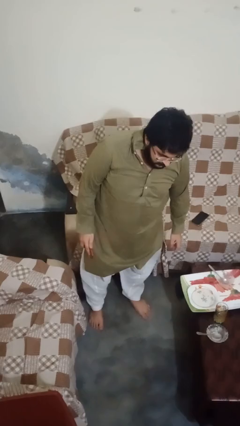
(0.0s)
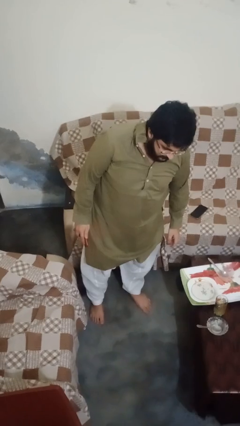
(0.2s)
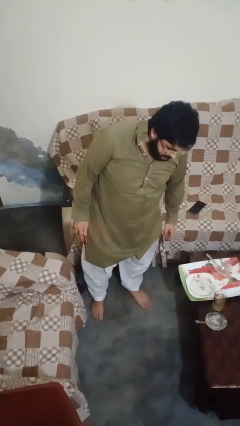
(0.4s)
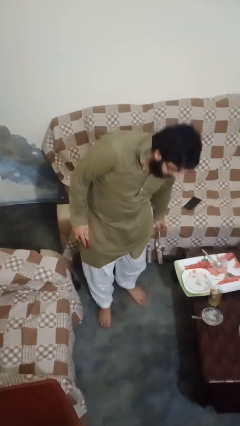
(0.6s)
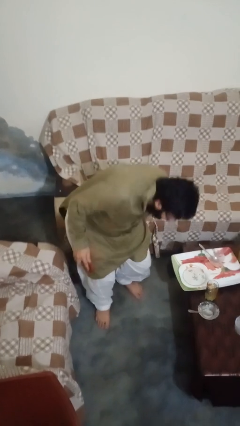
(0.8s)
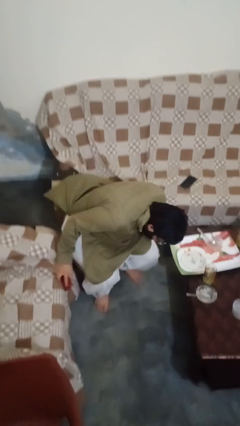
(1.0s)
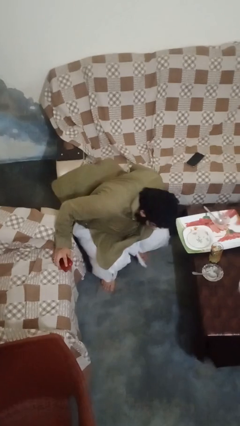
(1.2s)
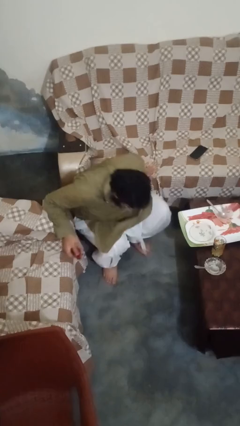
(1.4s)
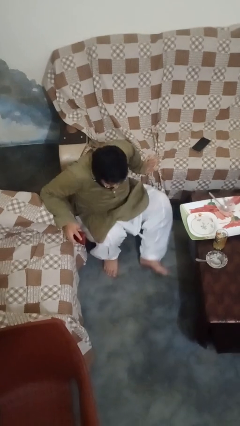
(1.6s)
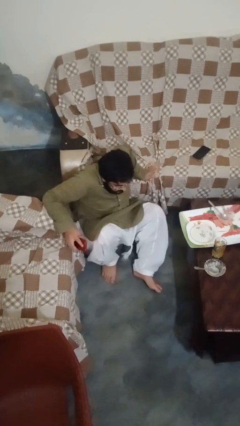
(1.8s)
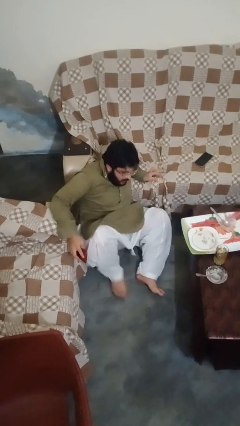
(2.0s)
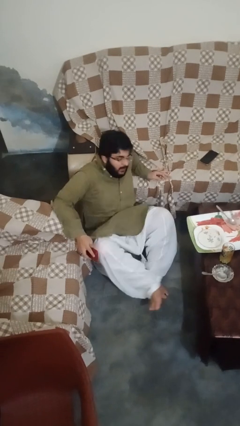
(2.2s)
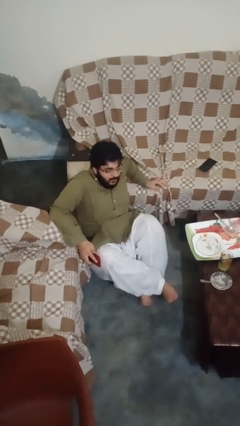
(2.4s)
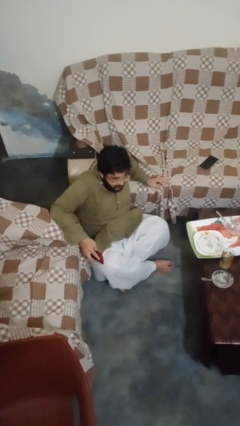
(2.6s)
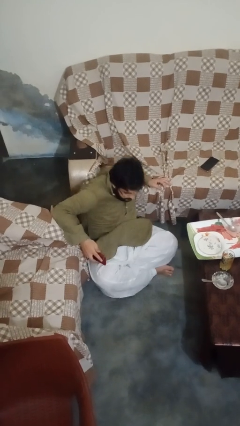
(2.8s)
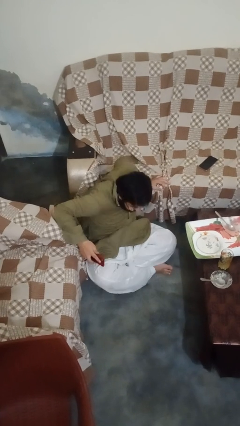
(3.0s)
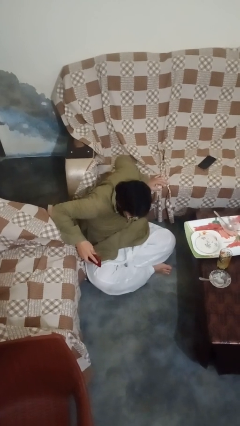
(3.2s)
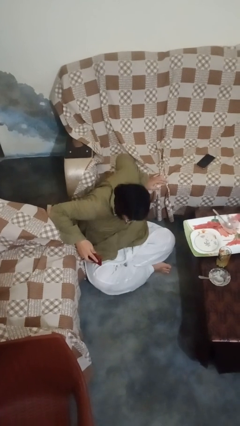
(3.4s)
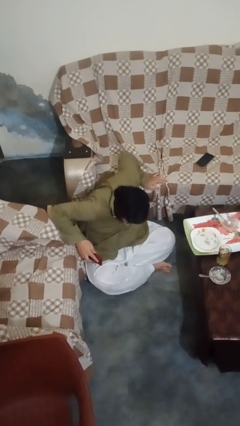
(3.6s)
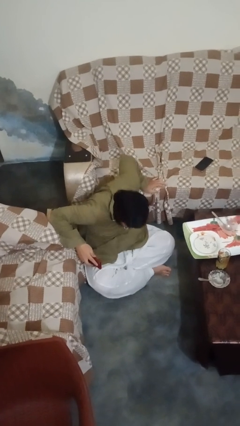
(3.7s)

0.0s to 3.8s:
person sits crisscross

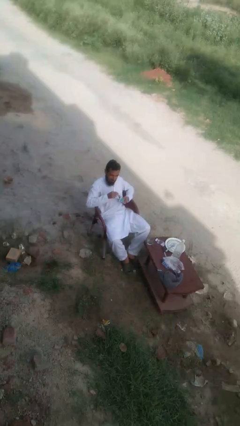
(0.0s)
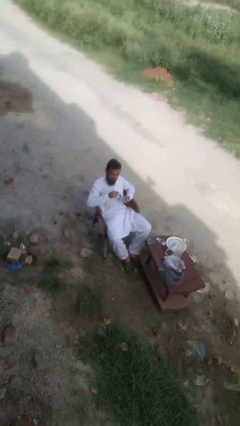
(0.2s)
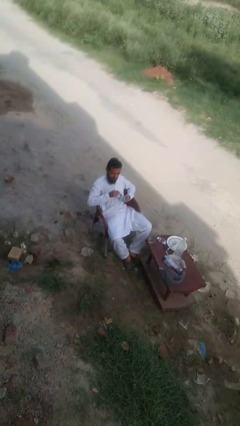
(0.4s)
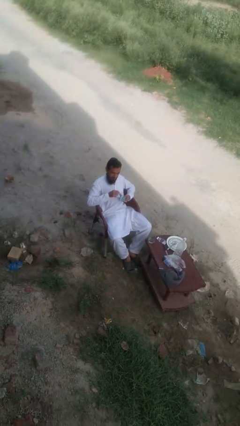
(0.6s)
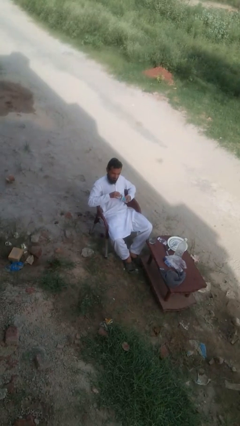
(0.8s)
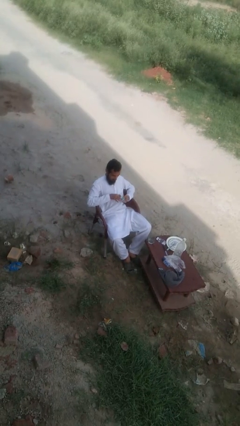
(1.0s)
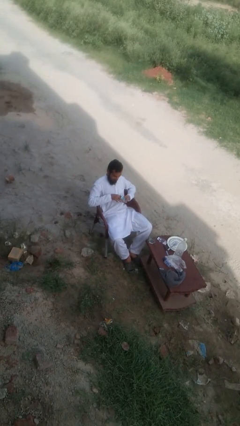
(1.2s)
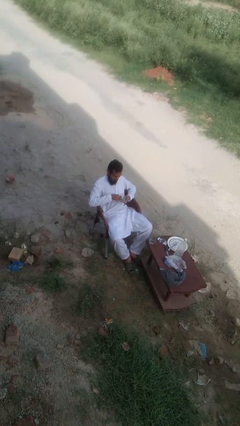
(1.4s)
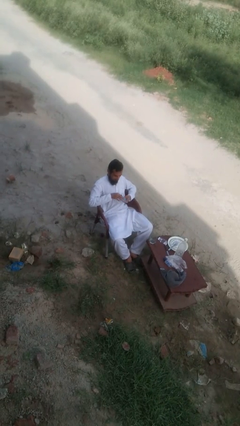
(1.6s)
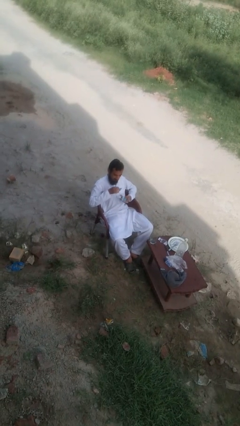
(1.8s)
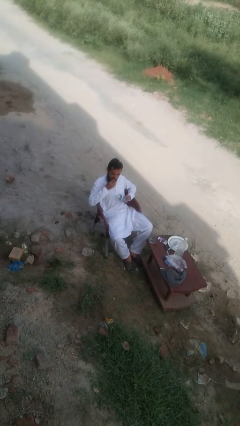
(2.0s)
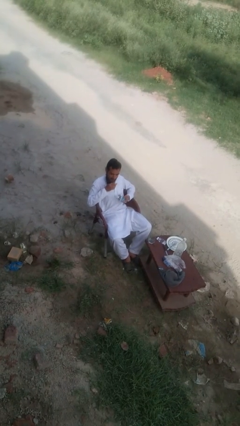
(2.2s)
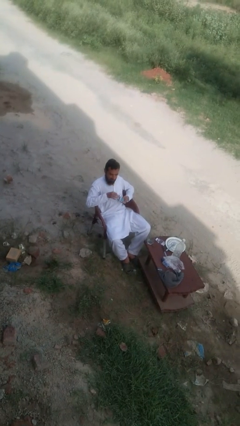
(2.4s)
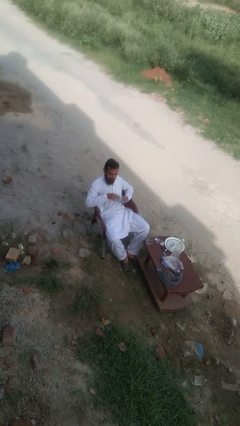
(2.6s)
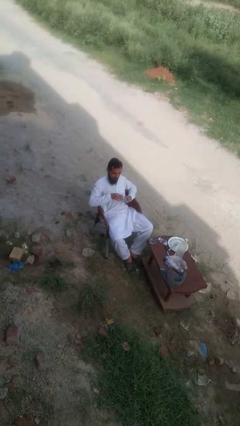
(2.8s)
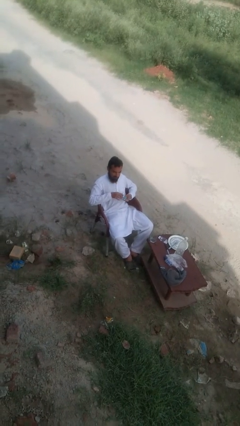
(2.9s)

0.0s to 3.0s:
person eats with hands

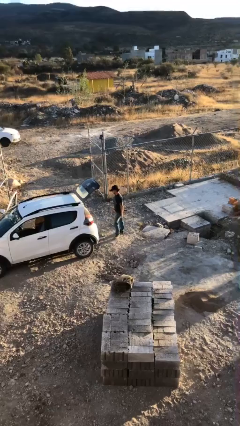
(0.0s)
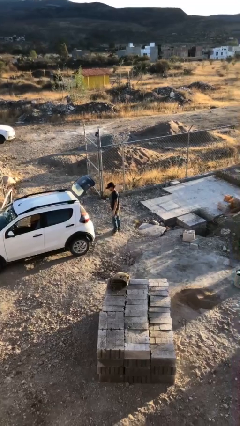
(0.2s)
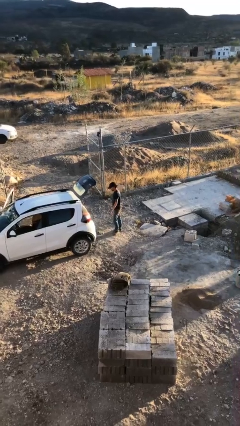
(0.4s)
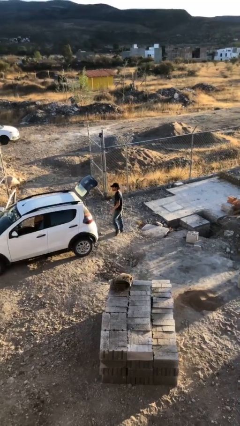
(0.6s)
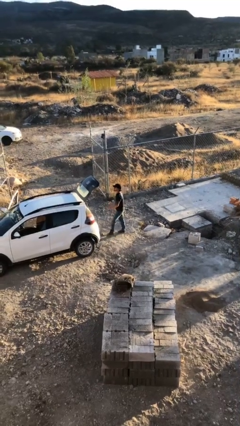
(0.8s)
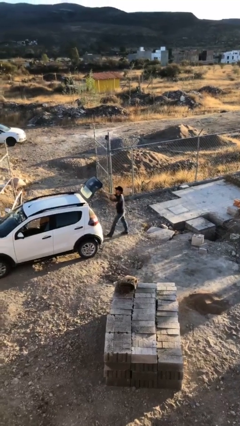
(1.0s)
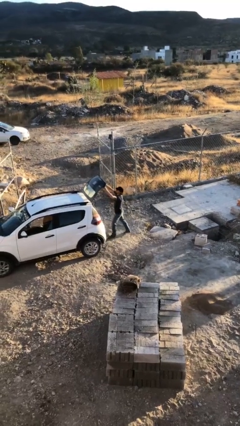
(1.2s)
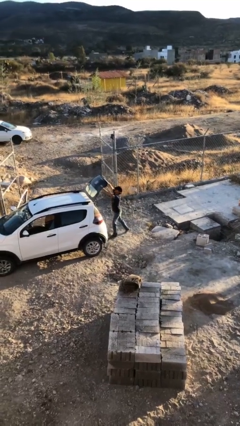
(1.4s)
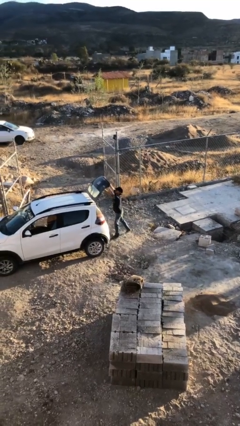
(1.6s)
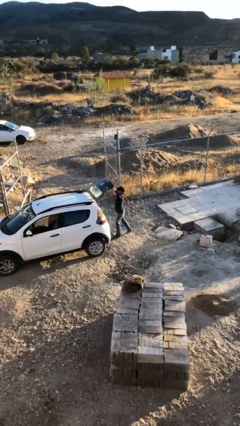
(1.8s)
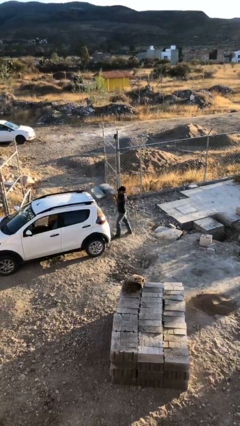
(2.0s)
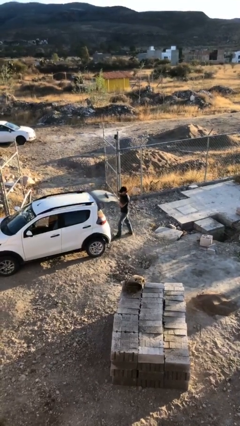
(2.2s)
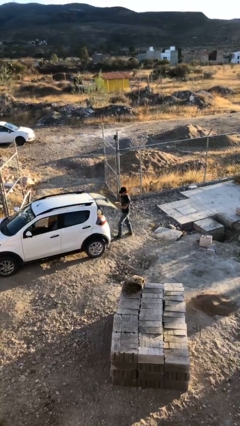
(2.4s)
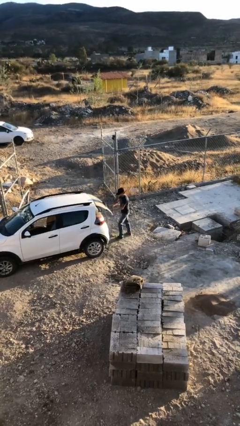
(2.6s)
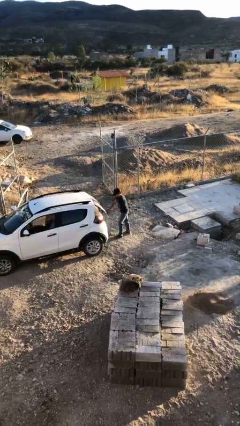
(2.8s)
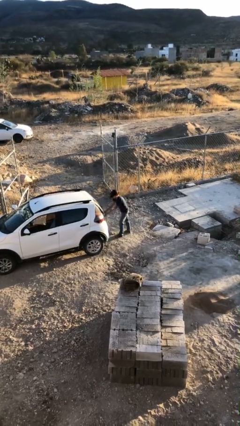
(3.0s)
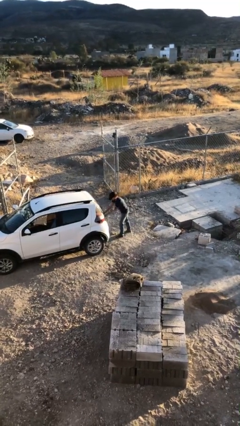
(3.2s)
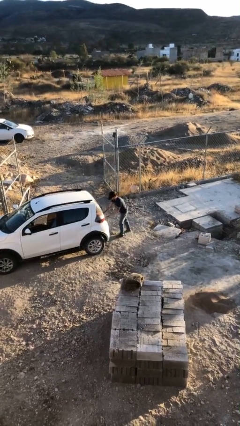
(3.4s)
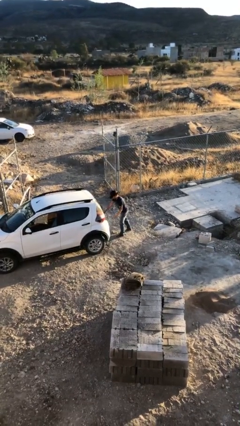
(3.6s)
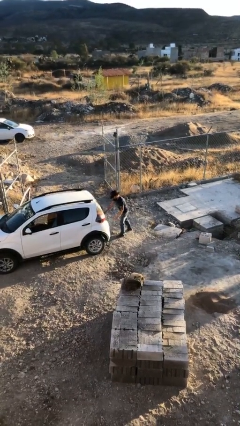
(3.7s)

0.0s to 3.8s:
person closes car trunk

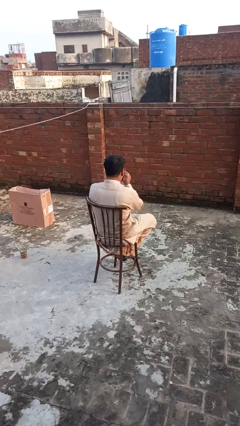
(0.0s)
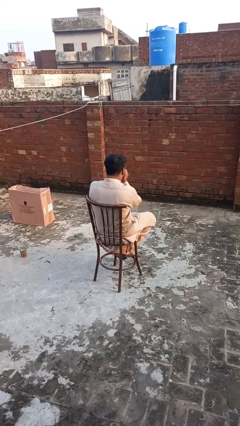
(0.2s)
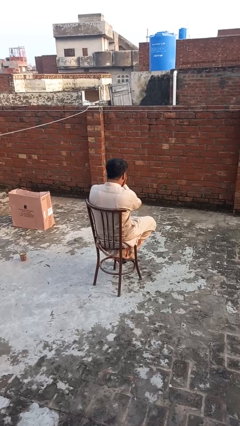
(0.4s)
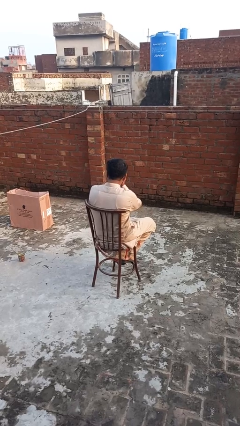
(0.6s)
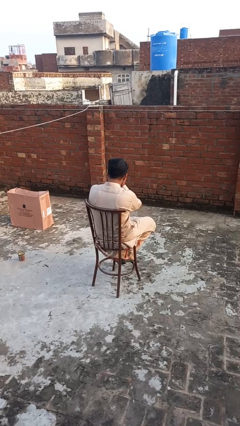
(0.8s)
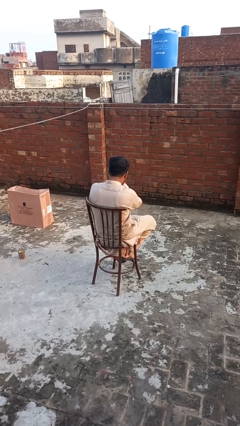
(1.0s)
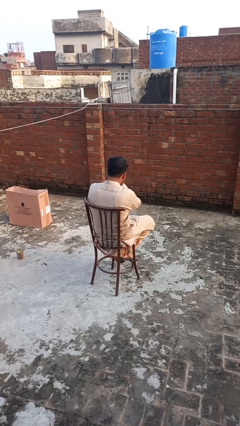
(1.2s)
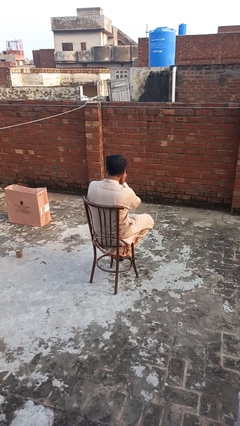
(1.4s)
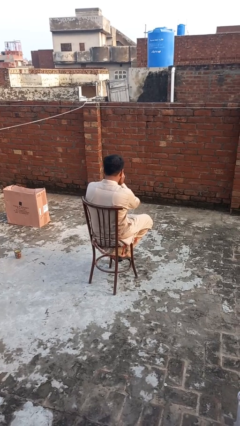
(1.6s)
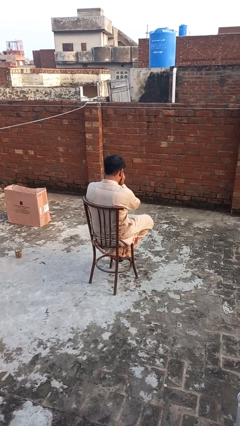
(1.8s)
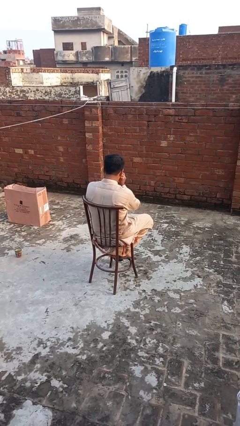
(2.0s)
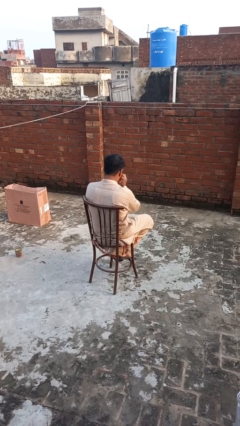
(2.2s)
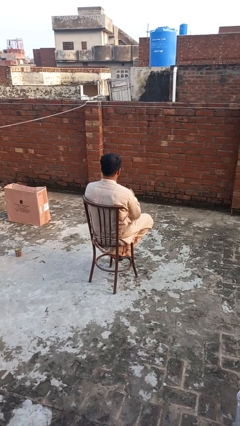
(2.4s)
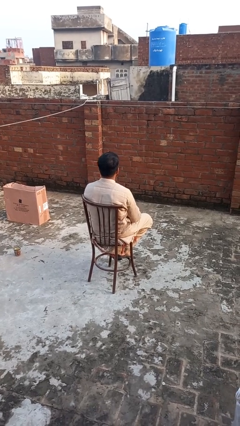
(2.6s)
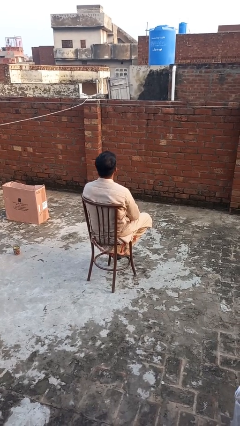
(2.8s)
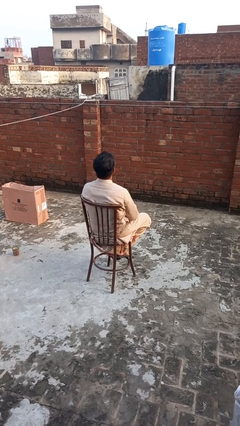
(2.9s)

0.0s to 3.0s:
person blows nose

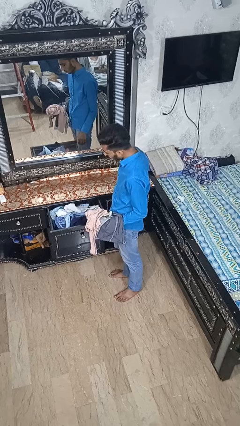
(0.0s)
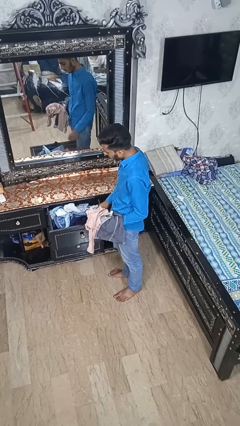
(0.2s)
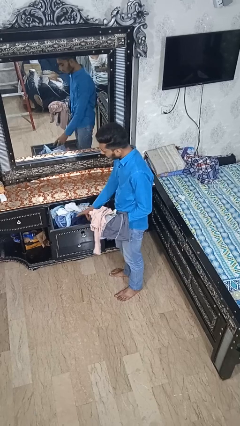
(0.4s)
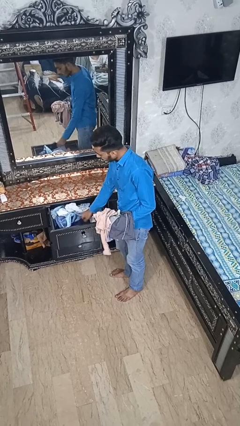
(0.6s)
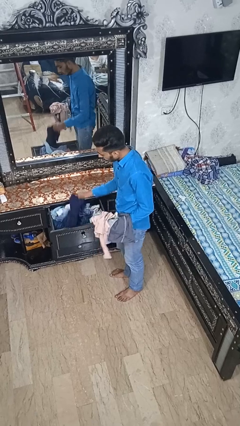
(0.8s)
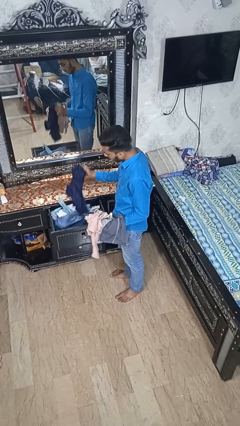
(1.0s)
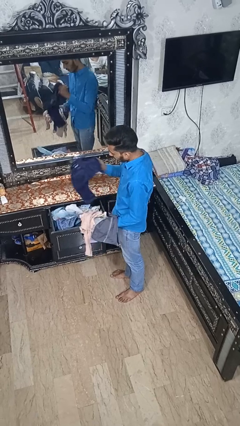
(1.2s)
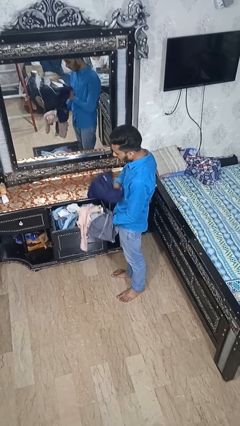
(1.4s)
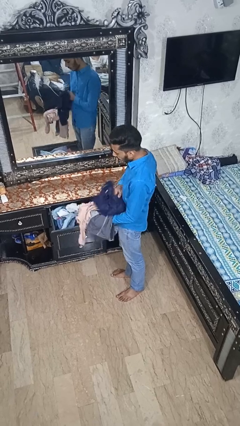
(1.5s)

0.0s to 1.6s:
person takes clothes from dresser

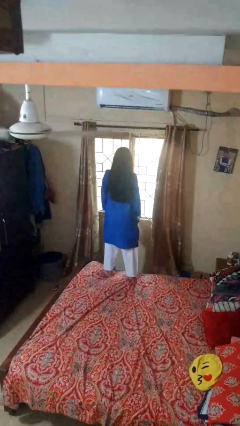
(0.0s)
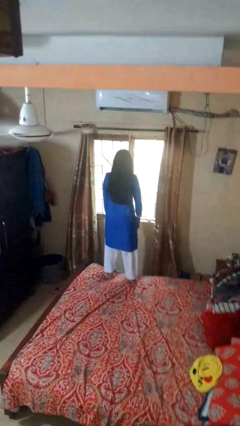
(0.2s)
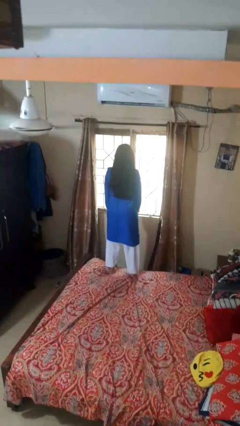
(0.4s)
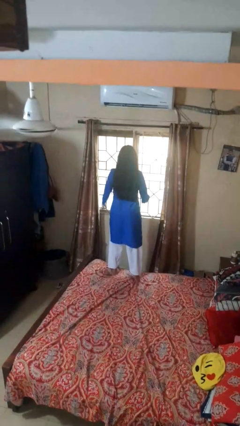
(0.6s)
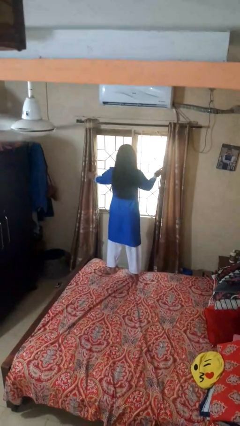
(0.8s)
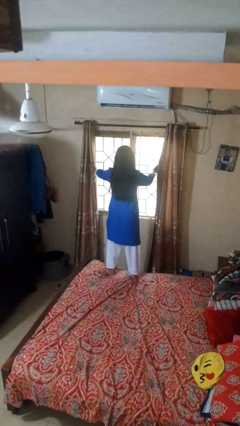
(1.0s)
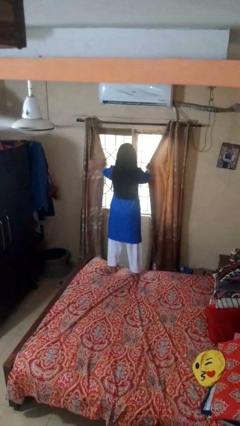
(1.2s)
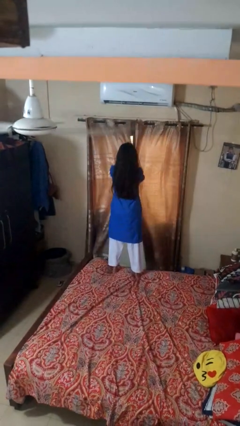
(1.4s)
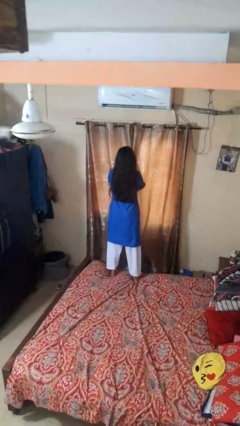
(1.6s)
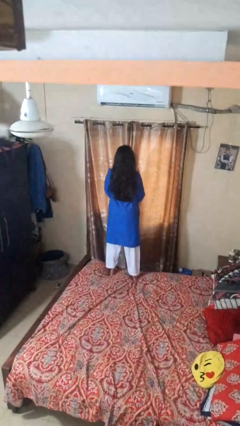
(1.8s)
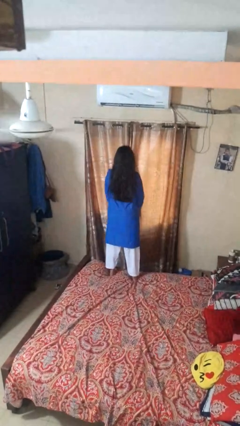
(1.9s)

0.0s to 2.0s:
person closes curtains

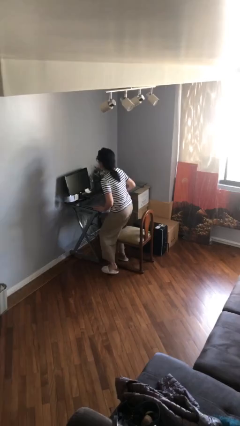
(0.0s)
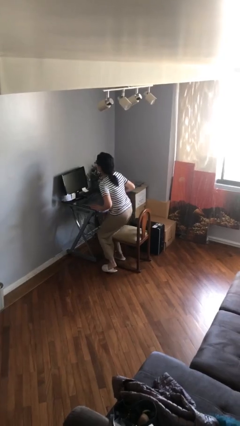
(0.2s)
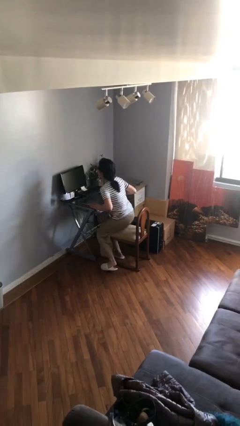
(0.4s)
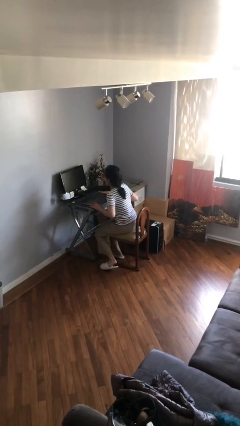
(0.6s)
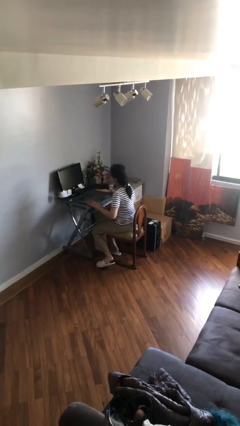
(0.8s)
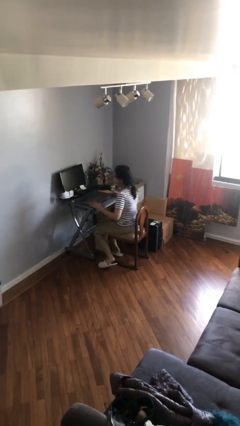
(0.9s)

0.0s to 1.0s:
person sits down
